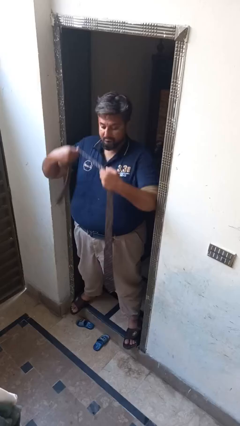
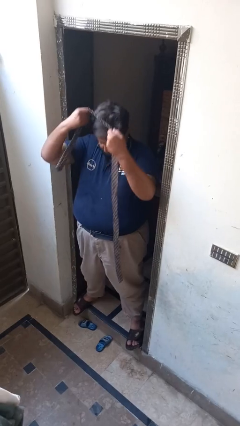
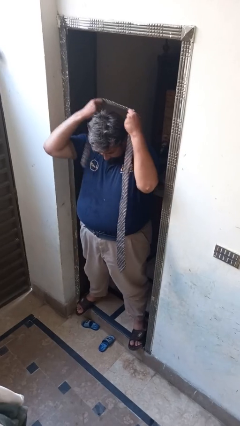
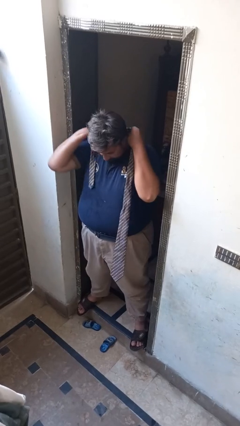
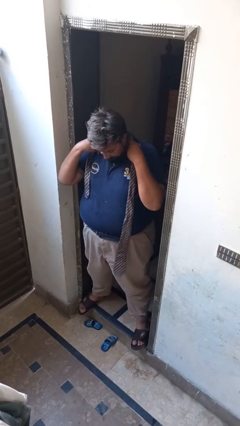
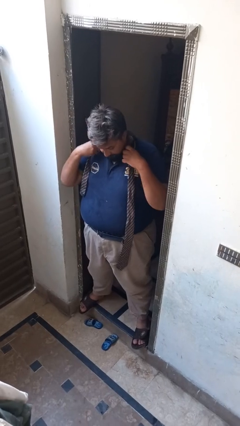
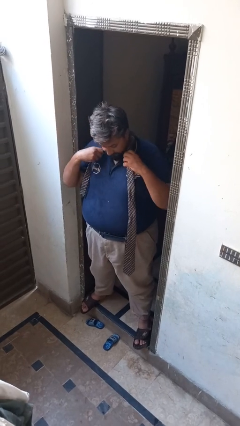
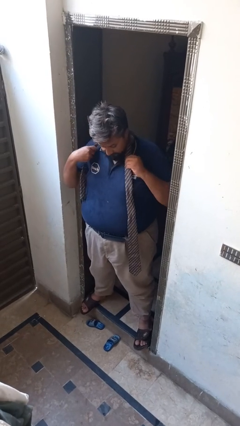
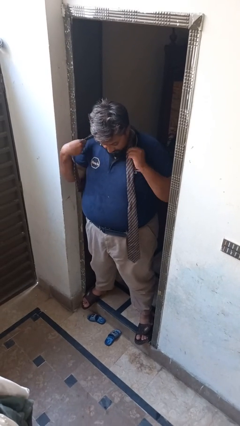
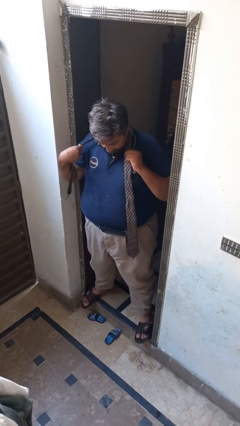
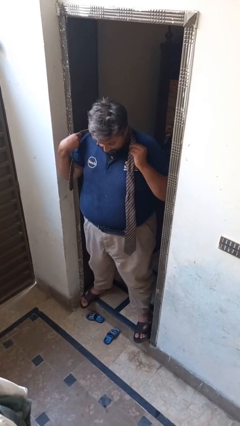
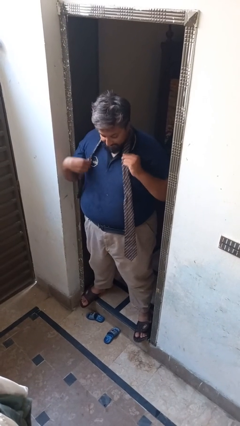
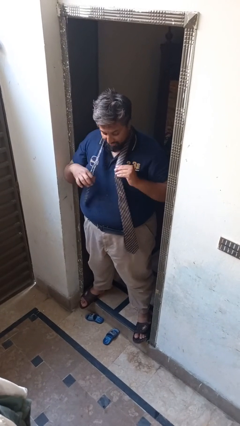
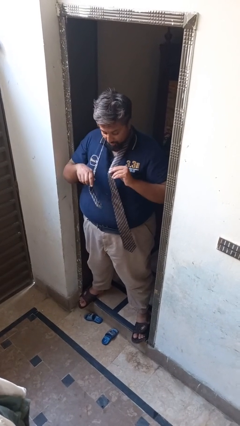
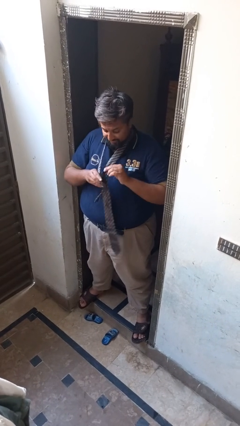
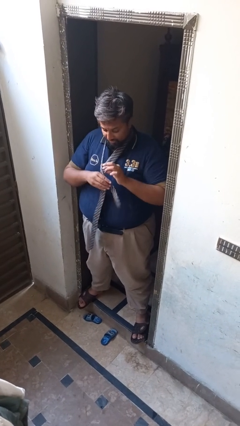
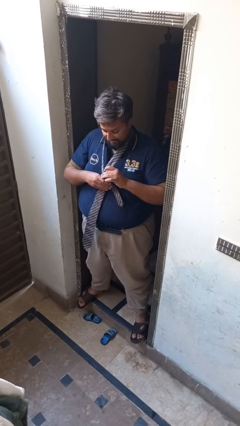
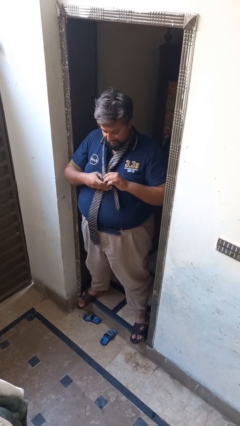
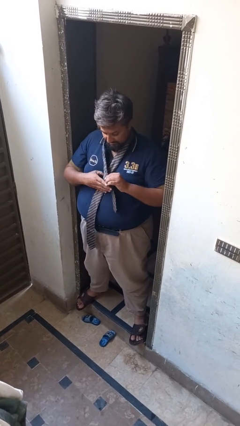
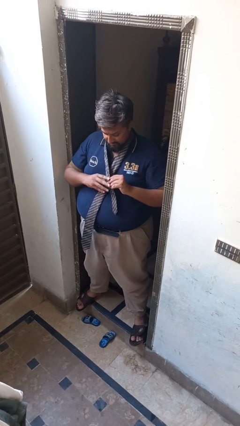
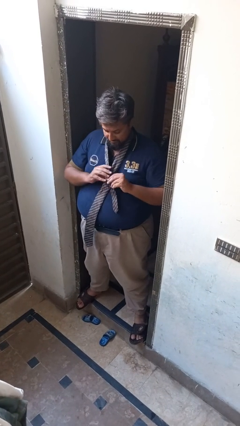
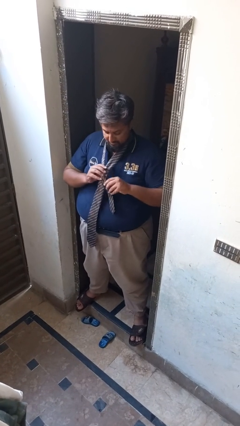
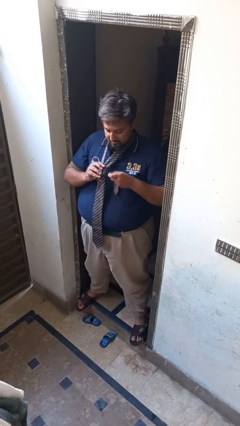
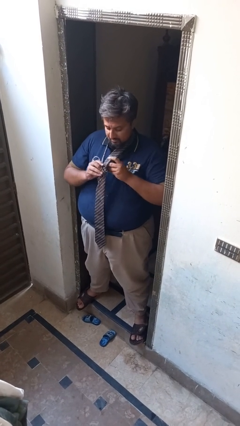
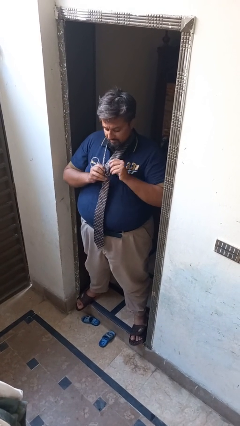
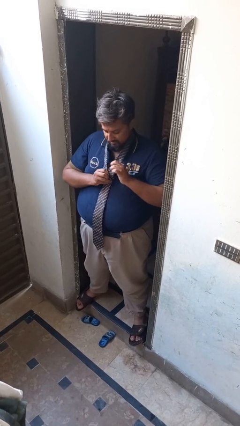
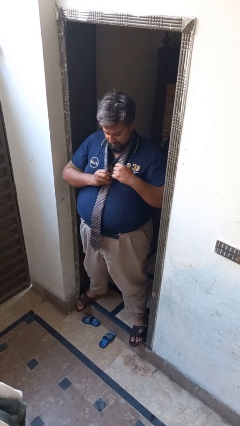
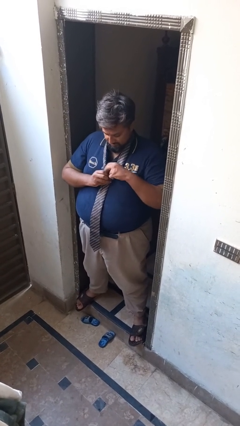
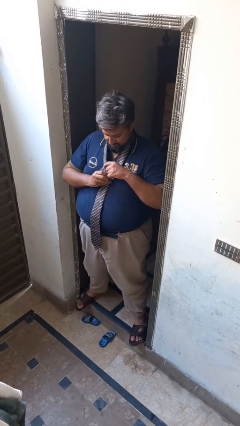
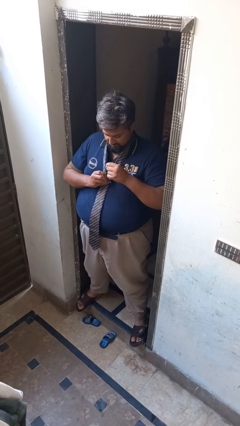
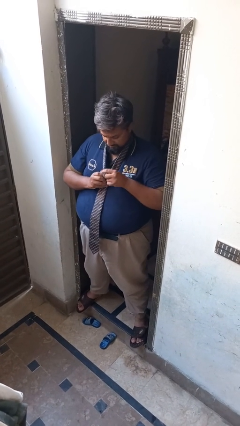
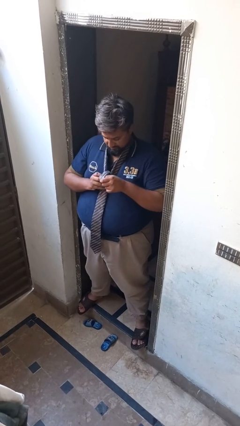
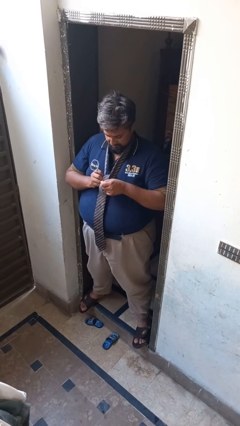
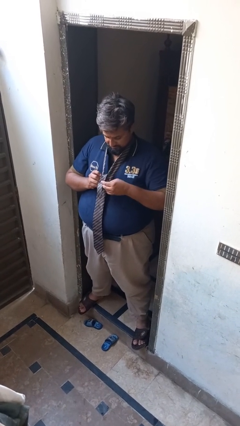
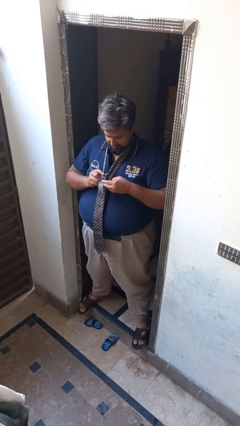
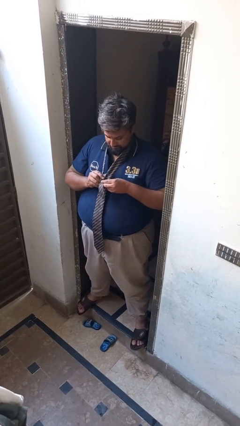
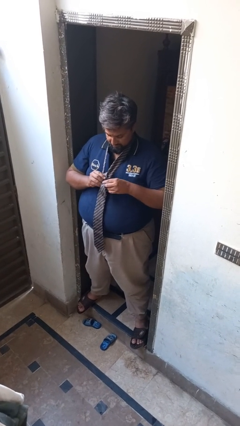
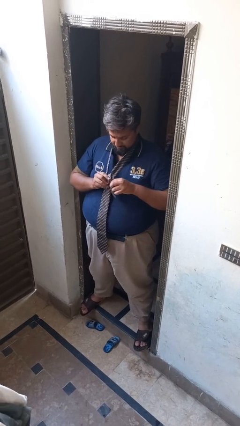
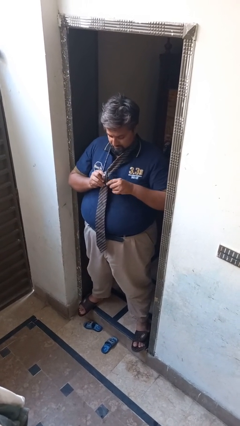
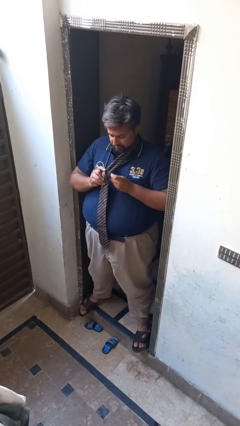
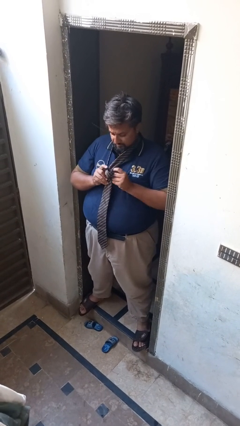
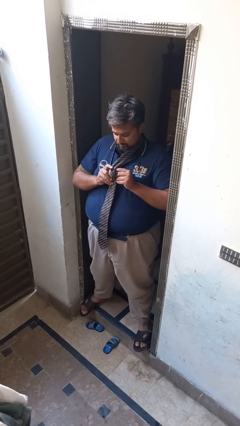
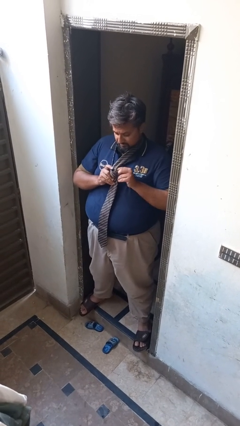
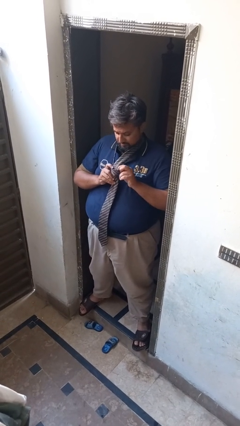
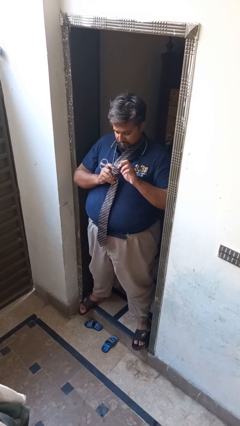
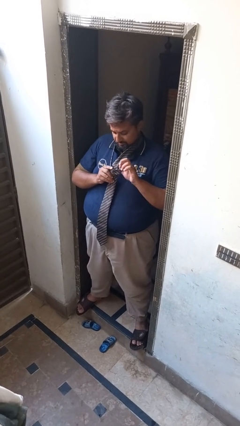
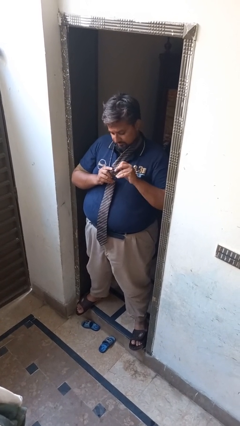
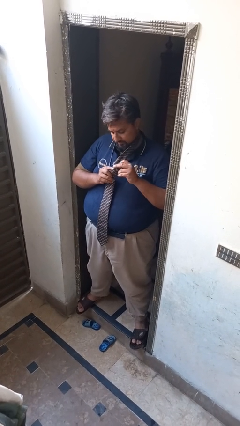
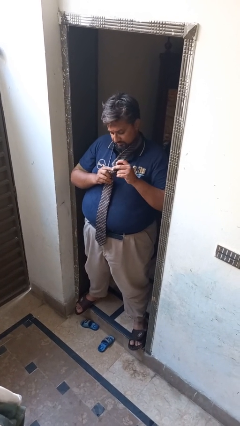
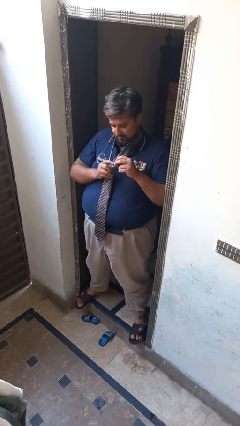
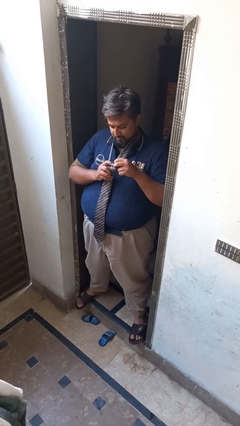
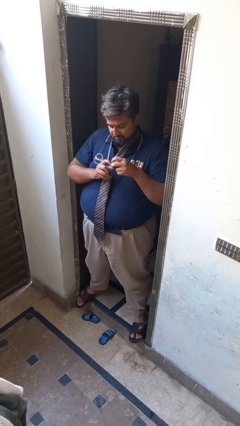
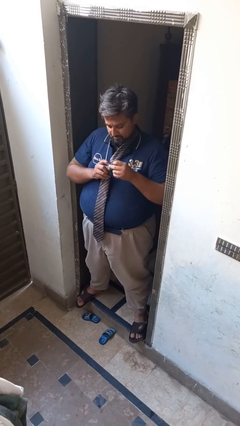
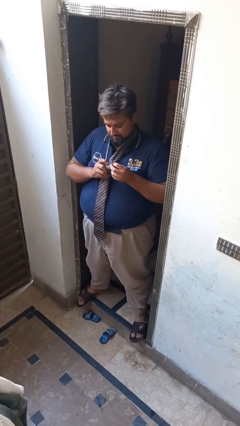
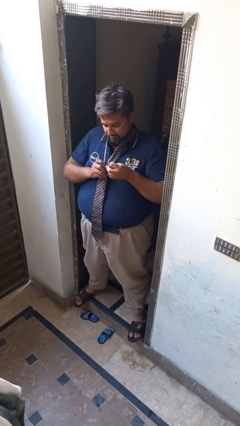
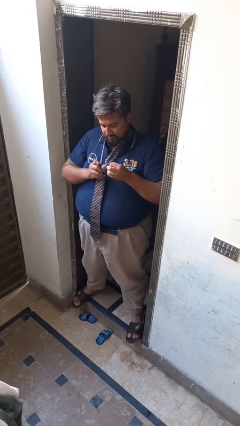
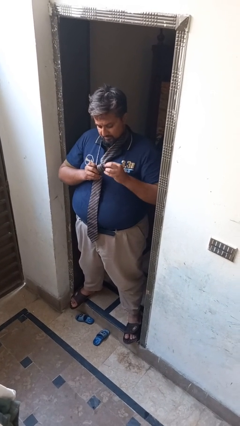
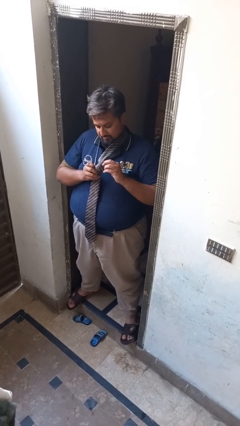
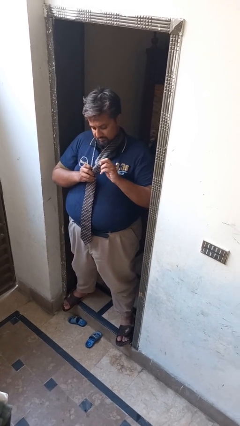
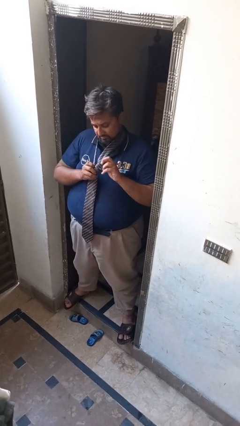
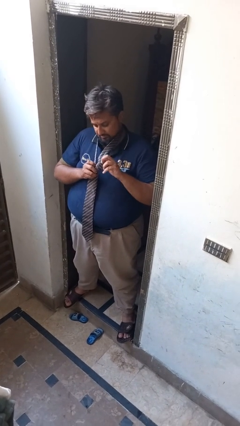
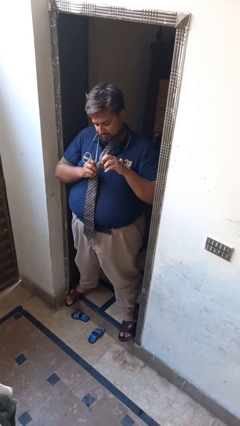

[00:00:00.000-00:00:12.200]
person puts on necktie

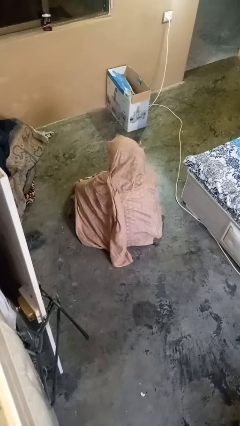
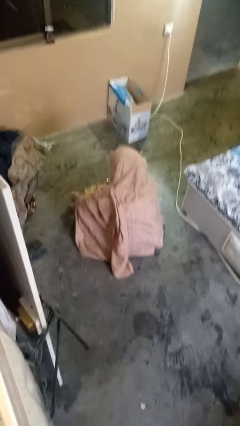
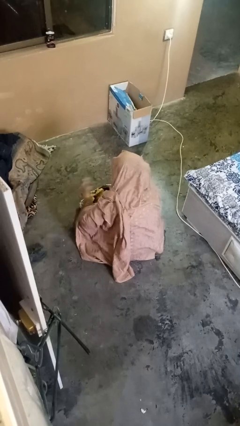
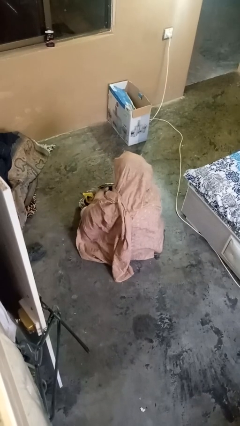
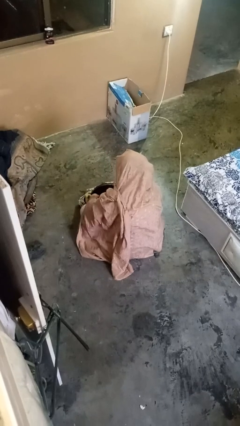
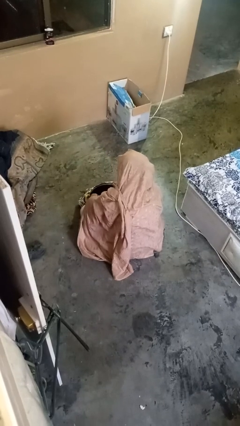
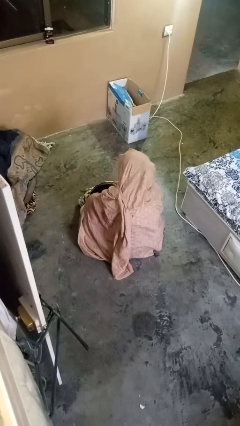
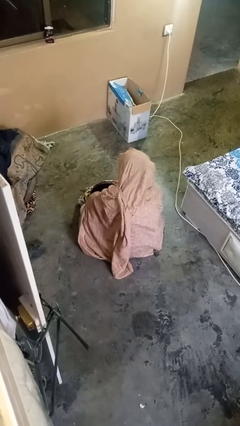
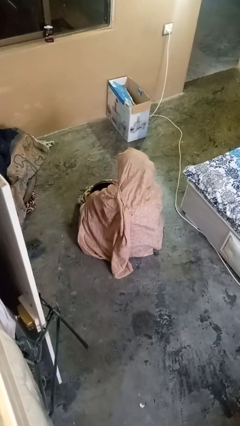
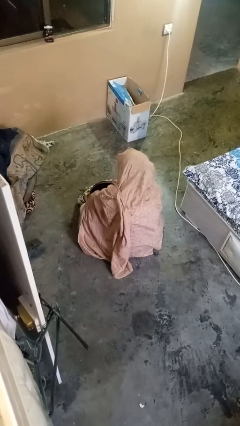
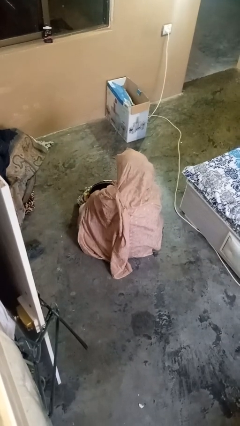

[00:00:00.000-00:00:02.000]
person searches in purse

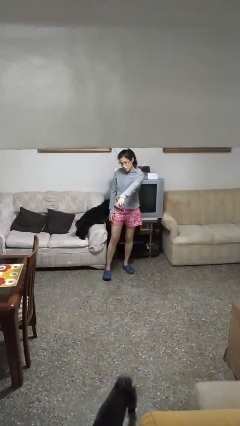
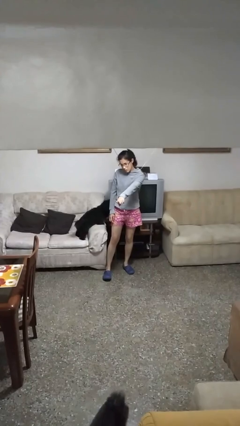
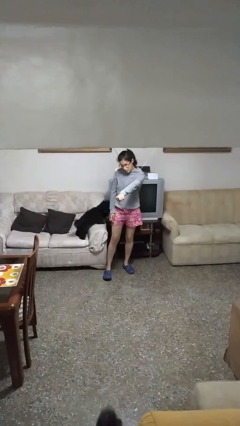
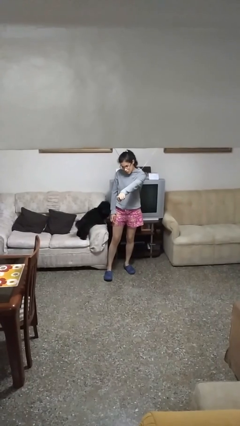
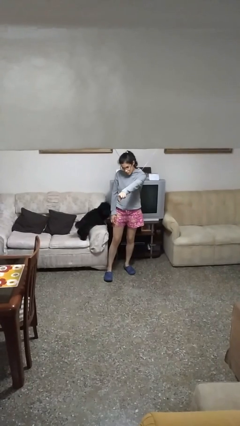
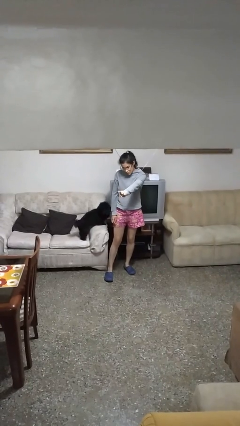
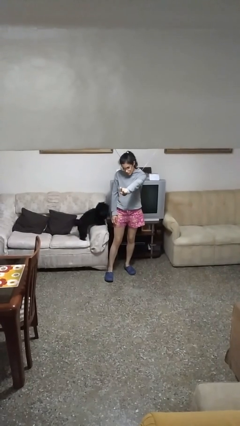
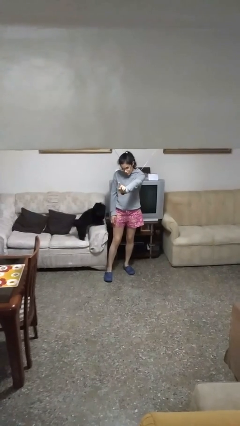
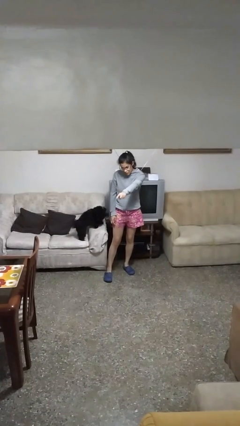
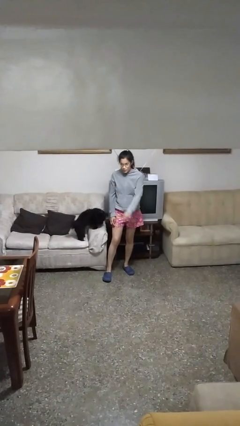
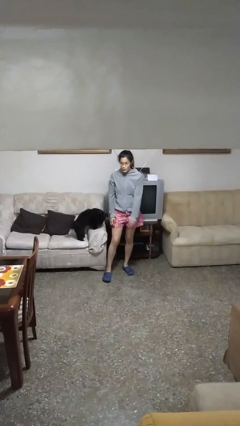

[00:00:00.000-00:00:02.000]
person points at person

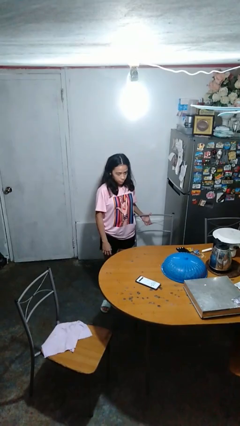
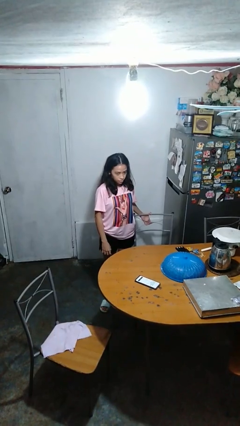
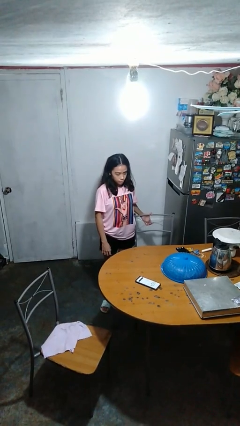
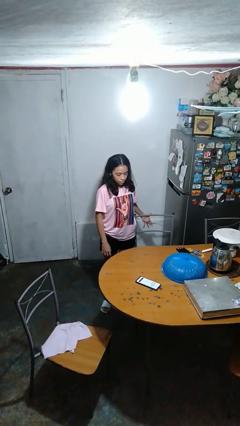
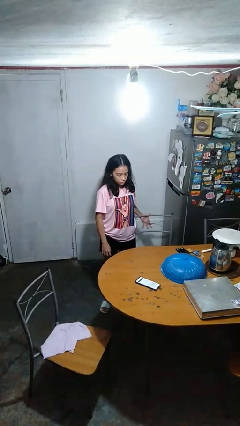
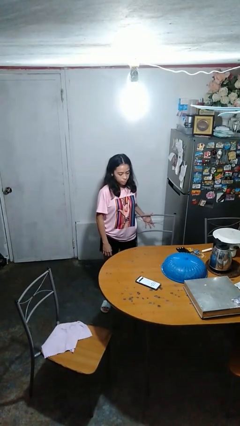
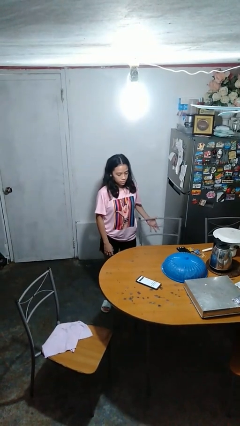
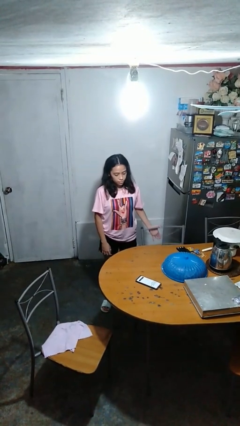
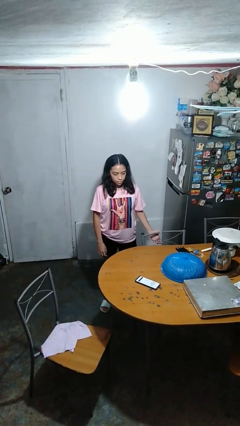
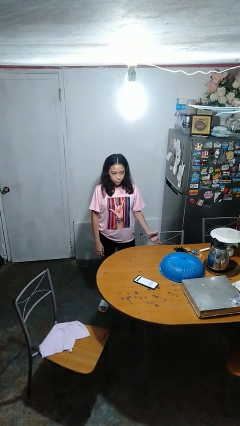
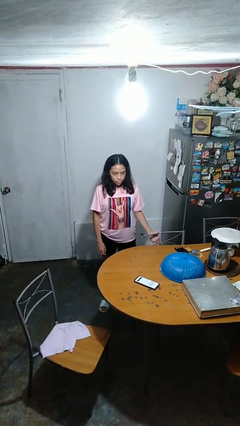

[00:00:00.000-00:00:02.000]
person pushes in chair
